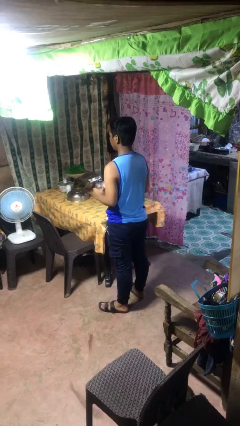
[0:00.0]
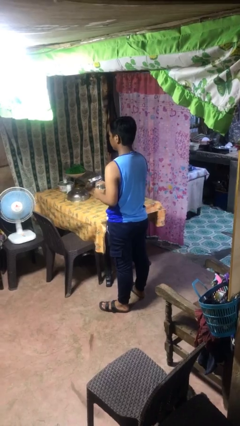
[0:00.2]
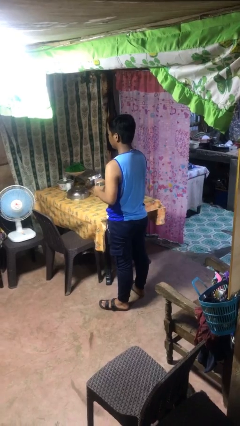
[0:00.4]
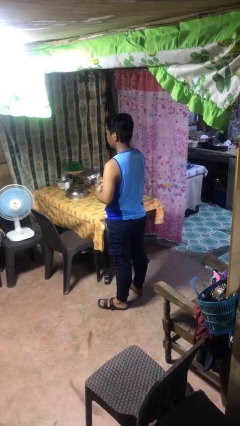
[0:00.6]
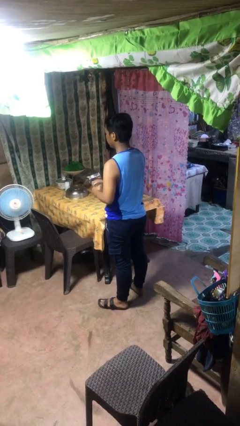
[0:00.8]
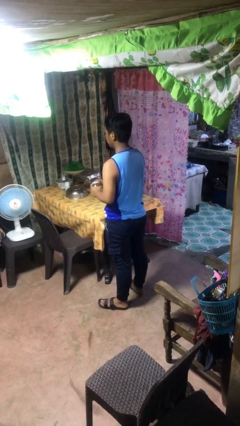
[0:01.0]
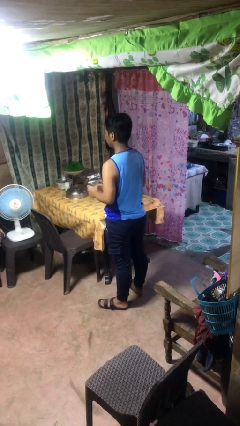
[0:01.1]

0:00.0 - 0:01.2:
person closes jar

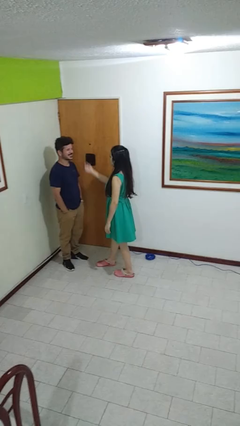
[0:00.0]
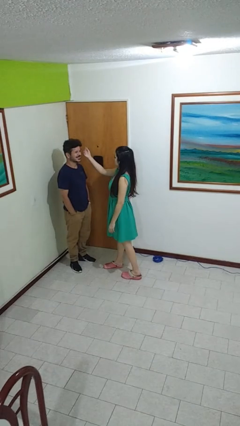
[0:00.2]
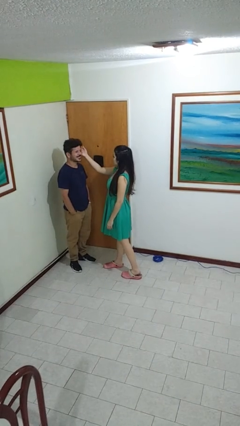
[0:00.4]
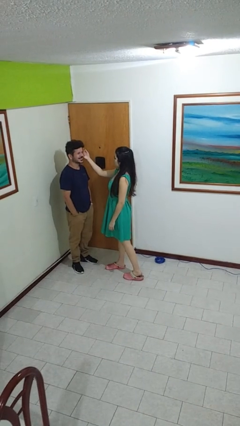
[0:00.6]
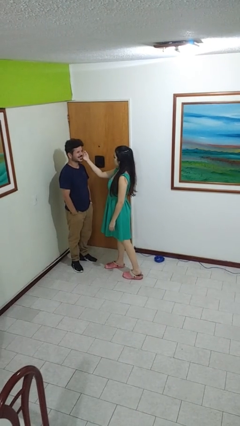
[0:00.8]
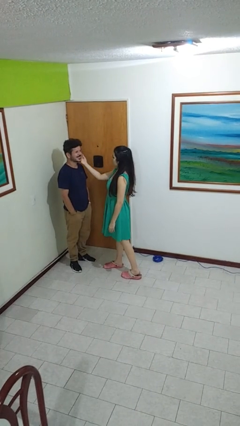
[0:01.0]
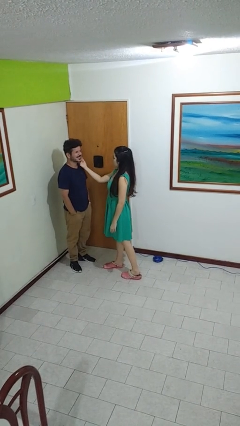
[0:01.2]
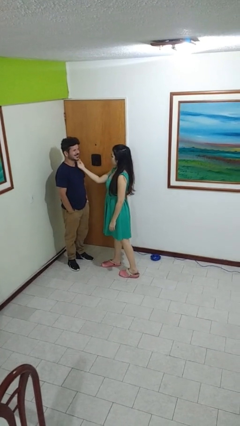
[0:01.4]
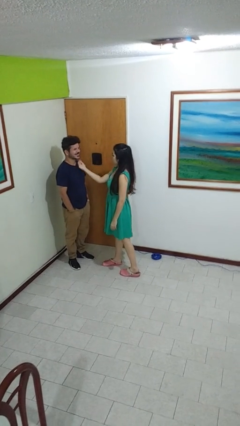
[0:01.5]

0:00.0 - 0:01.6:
person touches face of person

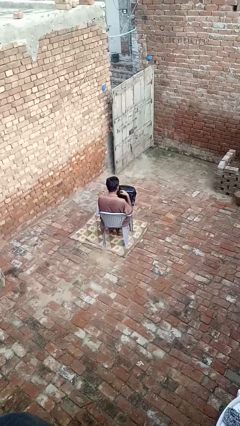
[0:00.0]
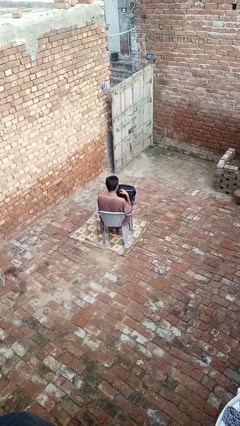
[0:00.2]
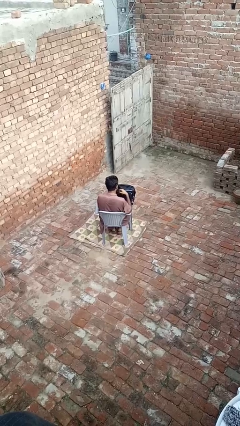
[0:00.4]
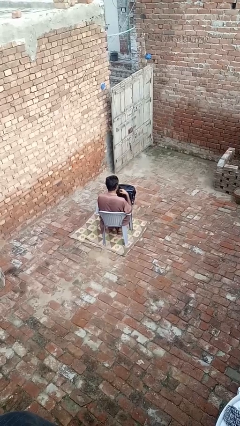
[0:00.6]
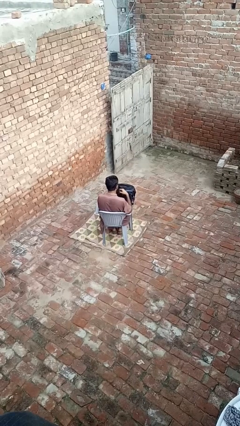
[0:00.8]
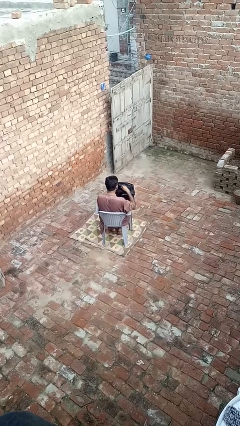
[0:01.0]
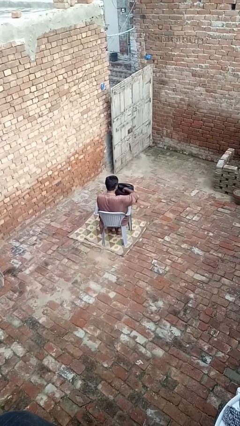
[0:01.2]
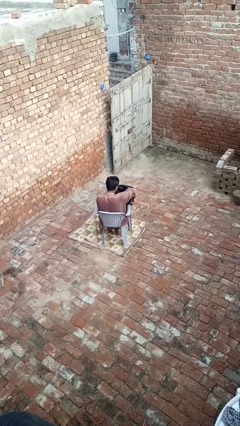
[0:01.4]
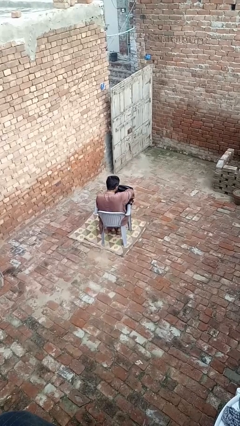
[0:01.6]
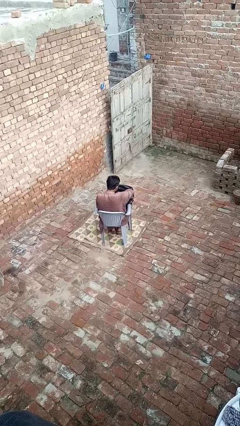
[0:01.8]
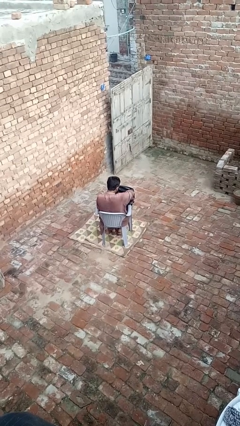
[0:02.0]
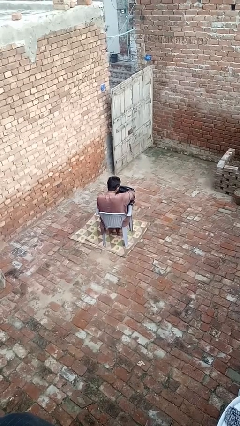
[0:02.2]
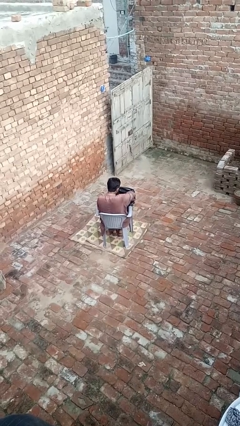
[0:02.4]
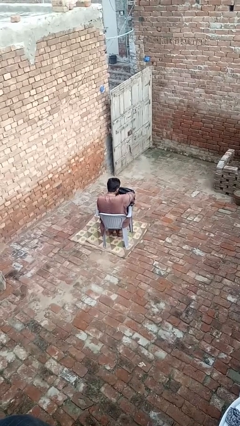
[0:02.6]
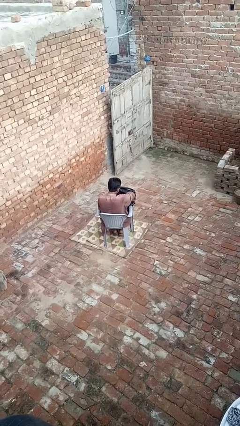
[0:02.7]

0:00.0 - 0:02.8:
person searches in backpack

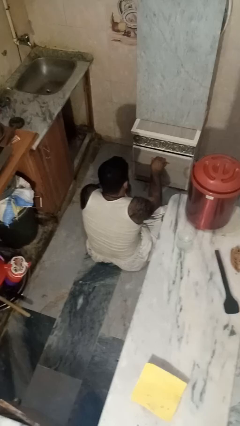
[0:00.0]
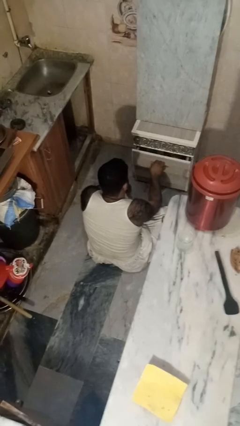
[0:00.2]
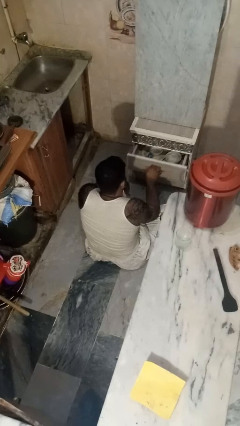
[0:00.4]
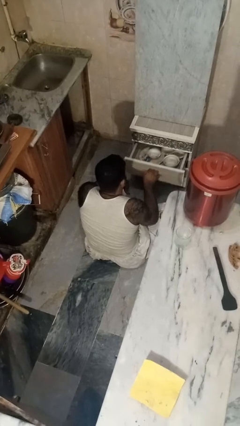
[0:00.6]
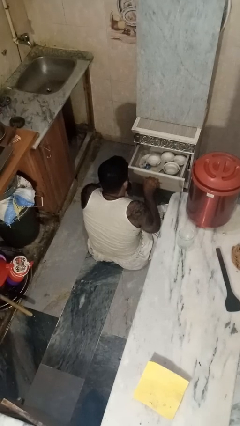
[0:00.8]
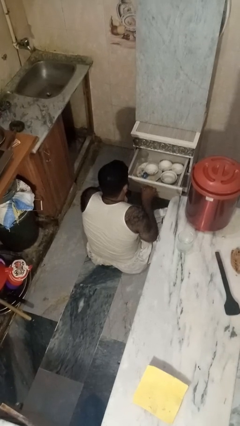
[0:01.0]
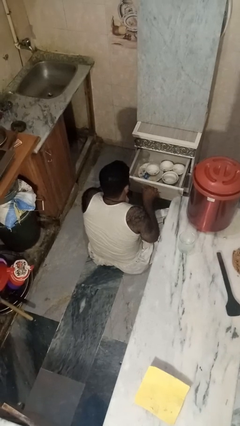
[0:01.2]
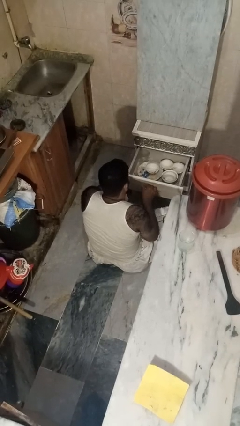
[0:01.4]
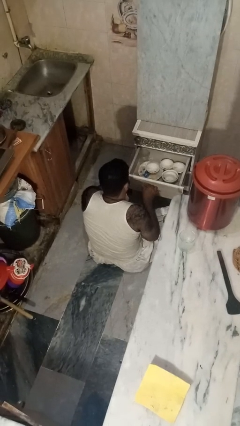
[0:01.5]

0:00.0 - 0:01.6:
person opens kitchen drawer

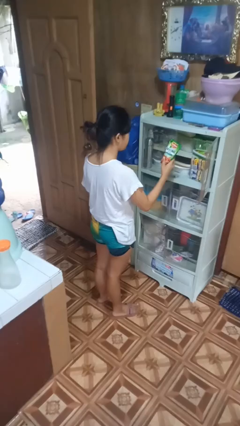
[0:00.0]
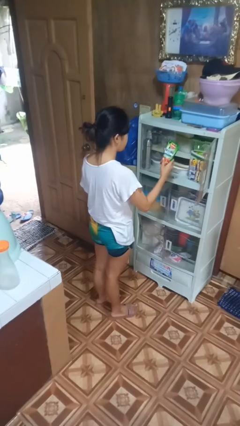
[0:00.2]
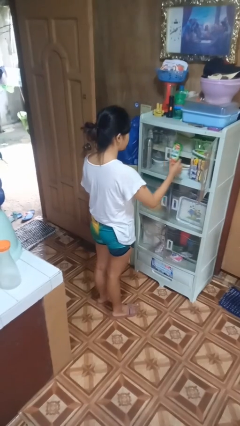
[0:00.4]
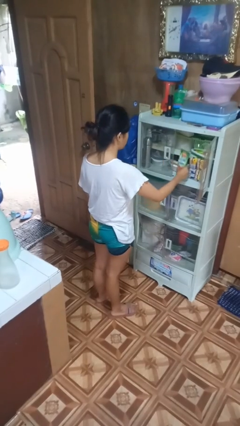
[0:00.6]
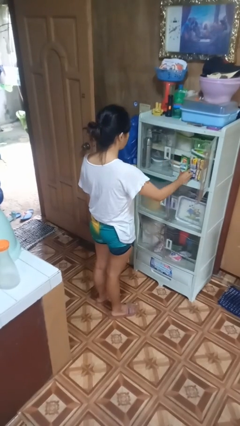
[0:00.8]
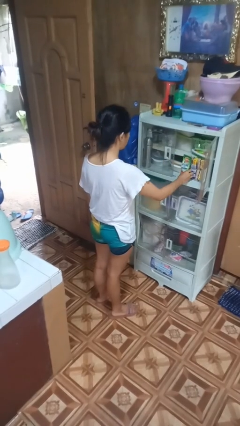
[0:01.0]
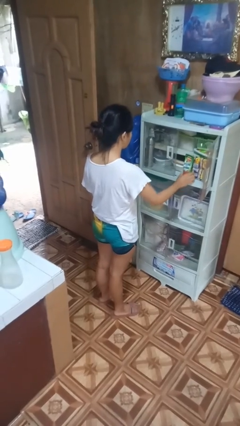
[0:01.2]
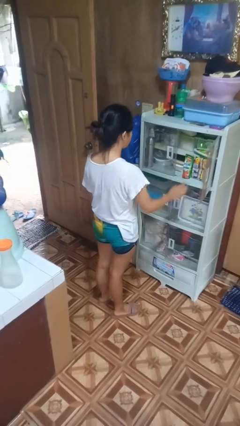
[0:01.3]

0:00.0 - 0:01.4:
person puts down object into cabinet

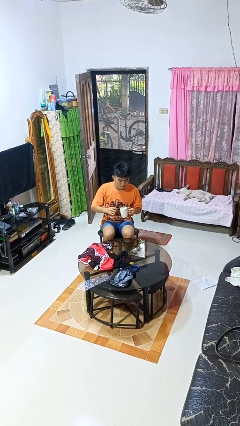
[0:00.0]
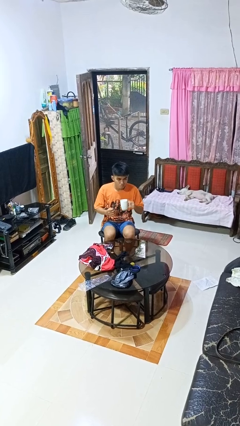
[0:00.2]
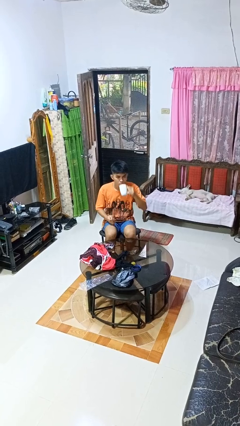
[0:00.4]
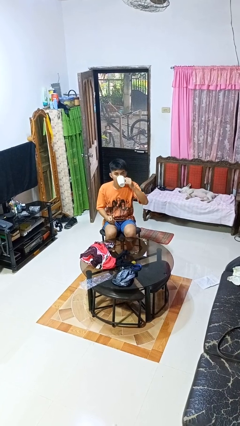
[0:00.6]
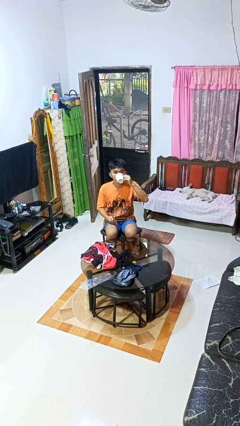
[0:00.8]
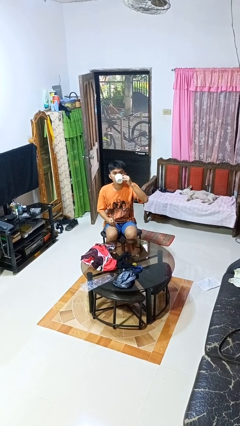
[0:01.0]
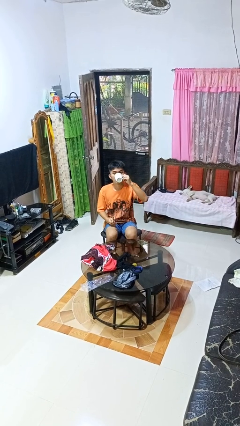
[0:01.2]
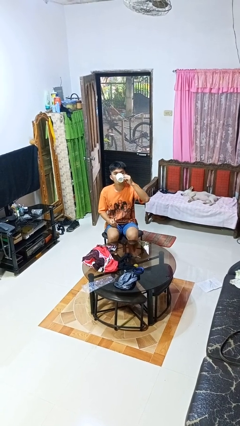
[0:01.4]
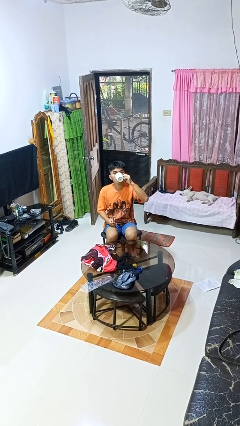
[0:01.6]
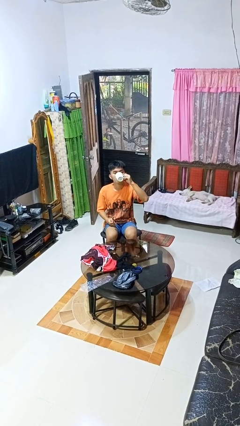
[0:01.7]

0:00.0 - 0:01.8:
person drinks from mug

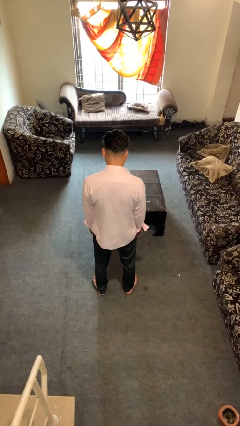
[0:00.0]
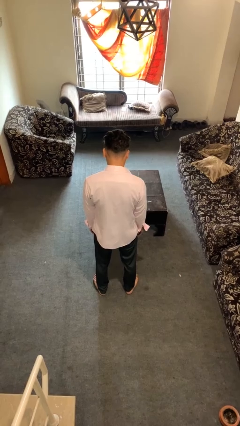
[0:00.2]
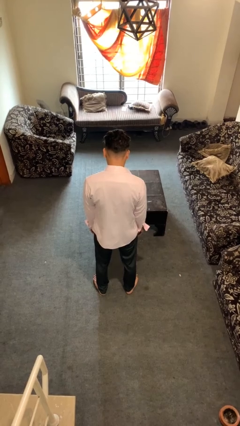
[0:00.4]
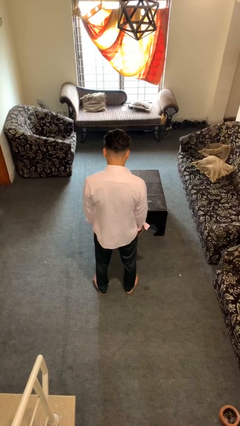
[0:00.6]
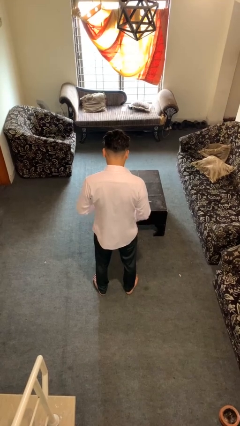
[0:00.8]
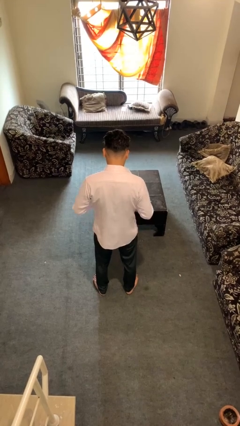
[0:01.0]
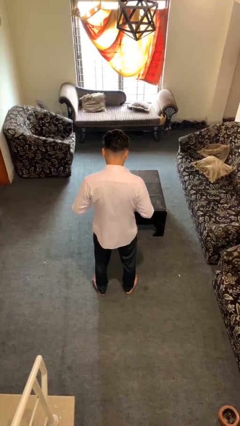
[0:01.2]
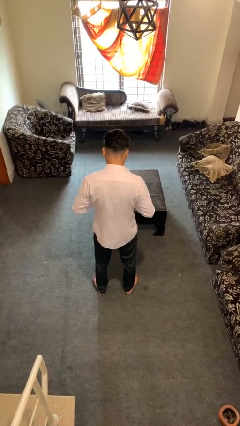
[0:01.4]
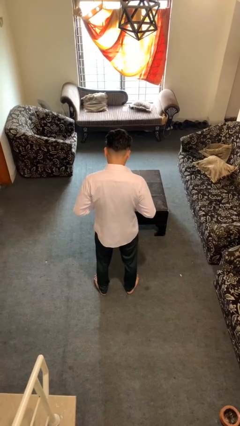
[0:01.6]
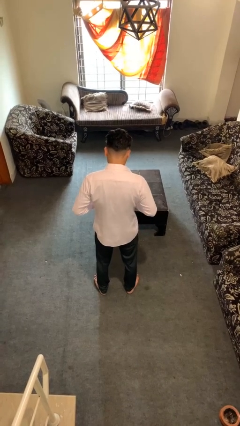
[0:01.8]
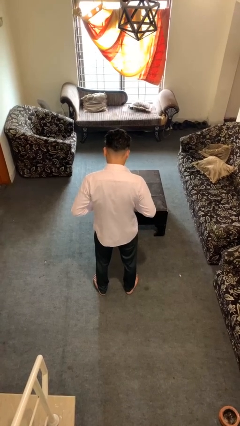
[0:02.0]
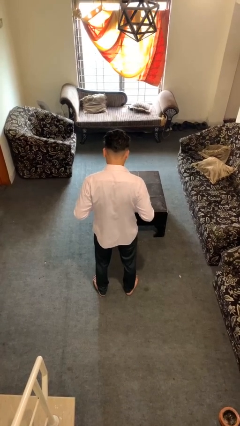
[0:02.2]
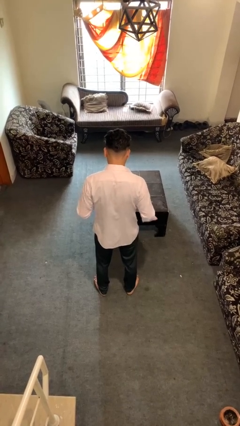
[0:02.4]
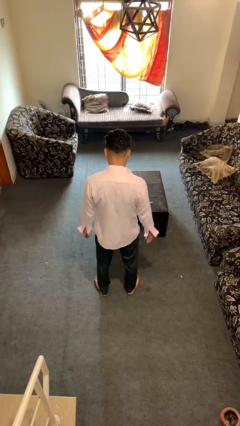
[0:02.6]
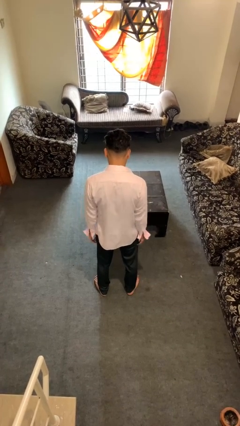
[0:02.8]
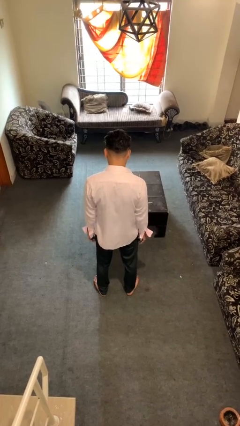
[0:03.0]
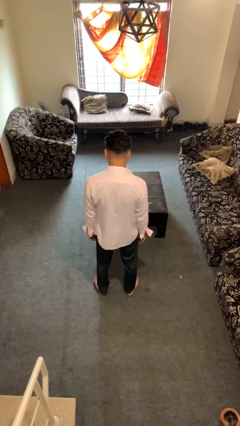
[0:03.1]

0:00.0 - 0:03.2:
person unbuttons shirt

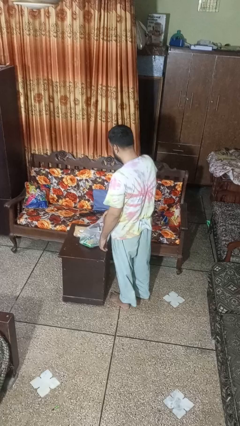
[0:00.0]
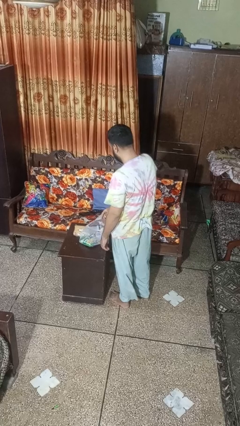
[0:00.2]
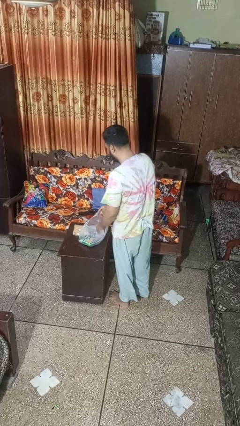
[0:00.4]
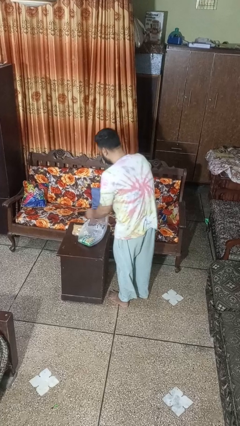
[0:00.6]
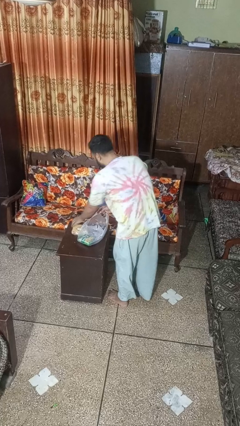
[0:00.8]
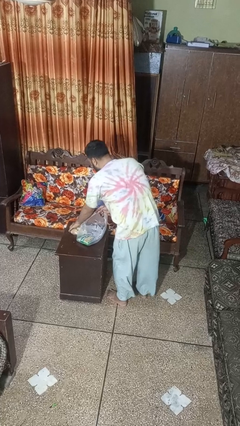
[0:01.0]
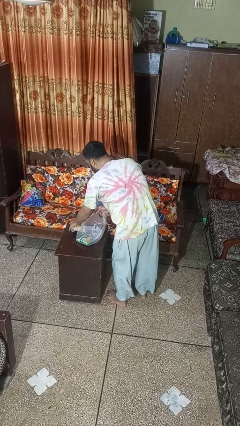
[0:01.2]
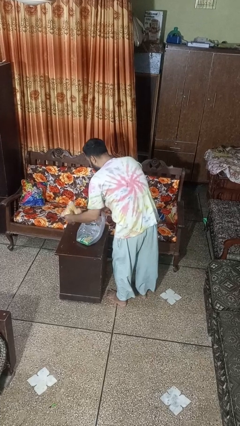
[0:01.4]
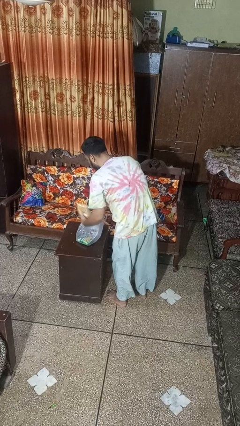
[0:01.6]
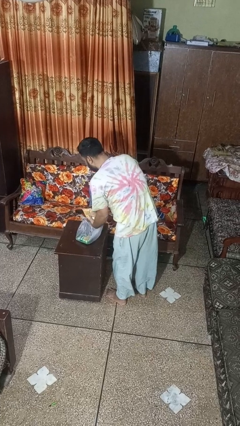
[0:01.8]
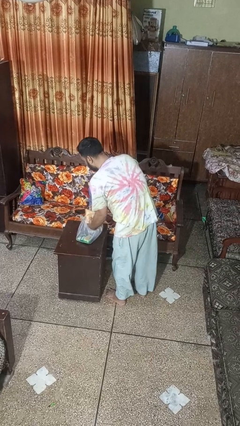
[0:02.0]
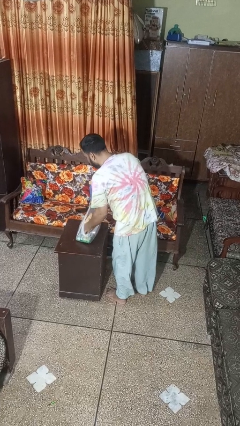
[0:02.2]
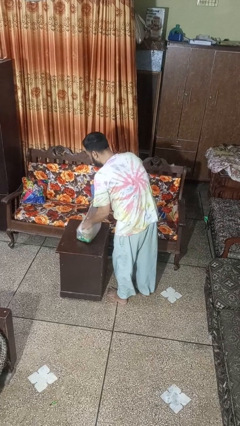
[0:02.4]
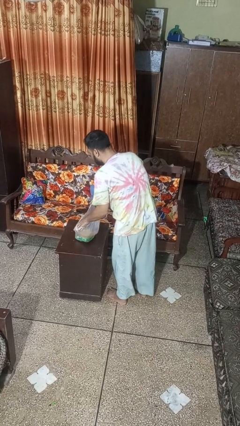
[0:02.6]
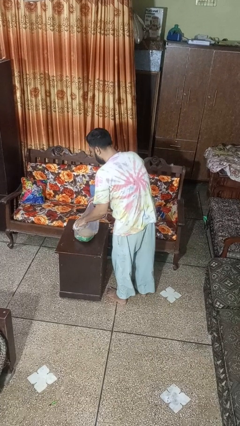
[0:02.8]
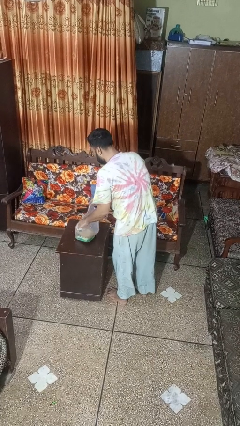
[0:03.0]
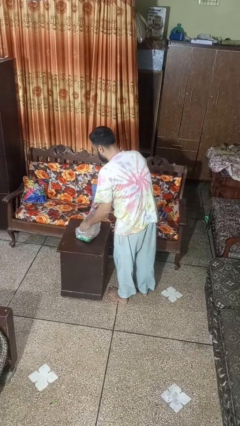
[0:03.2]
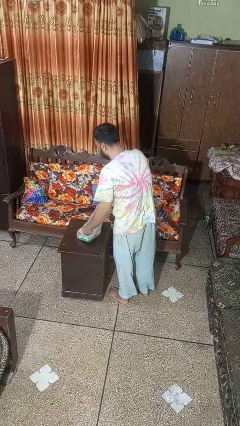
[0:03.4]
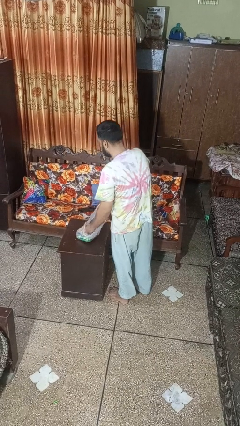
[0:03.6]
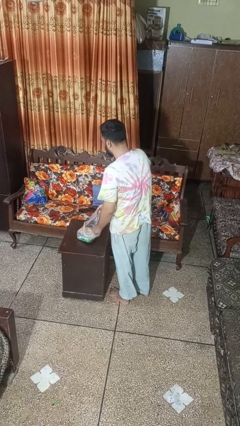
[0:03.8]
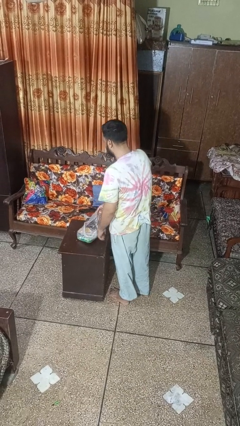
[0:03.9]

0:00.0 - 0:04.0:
person puts object into bag
